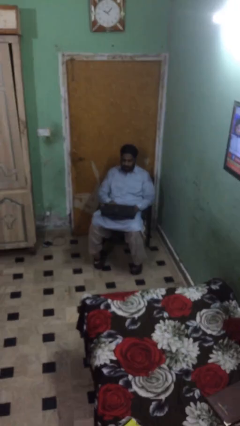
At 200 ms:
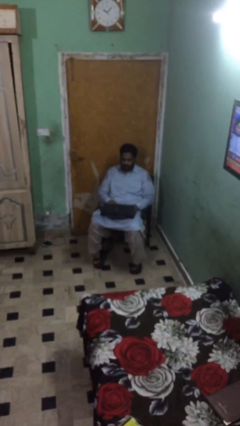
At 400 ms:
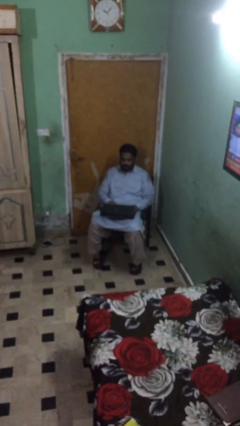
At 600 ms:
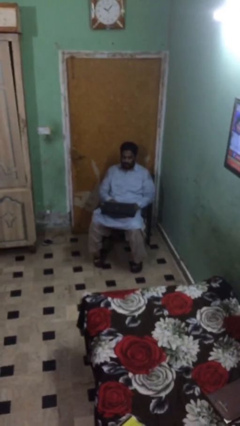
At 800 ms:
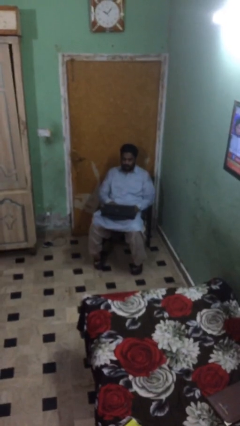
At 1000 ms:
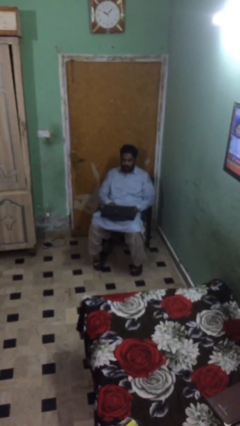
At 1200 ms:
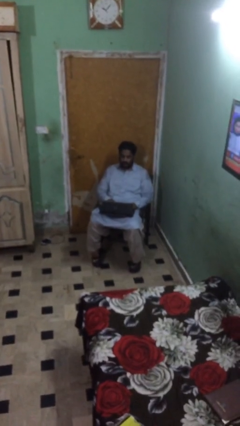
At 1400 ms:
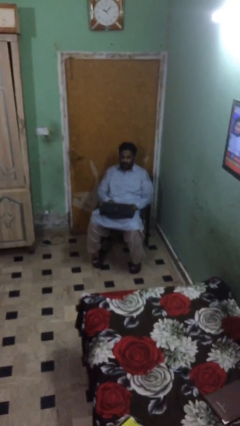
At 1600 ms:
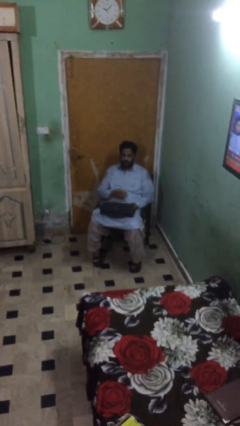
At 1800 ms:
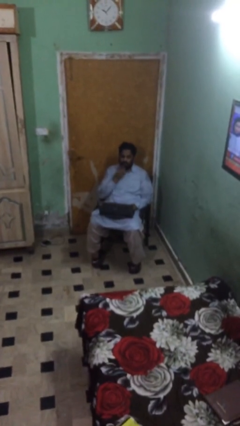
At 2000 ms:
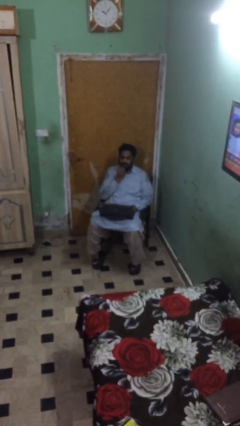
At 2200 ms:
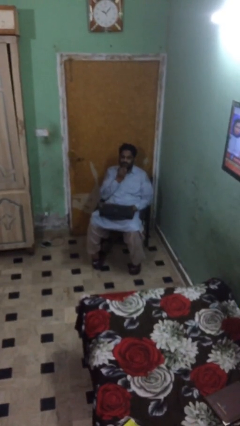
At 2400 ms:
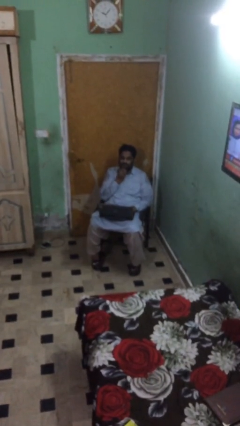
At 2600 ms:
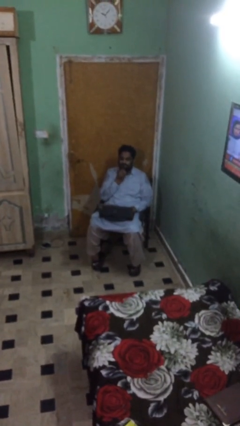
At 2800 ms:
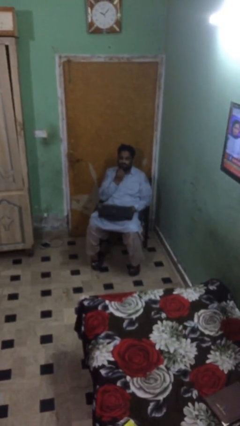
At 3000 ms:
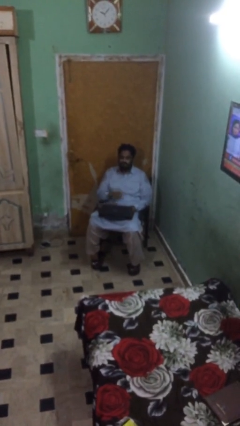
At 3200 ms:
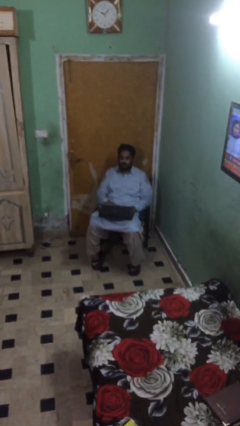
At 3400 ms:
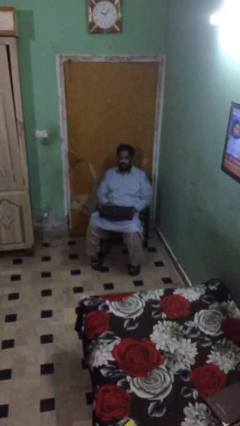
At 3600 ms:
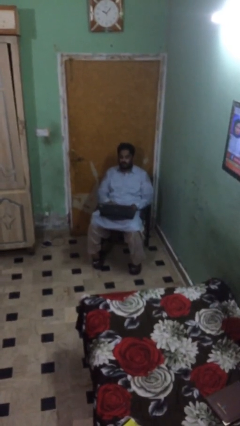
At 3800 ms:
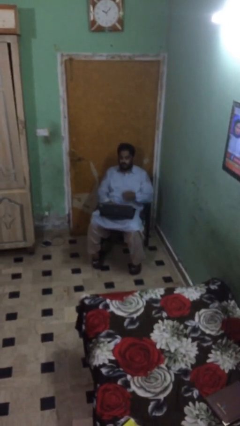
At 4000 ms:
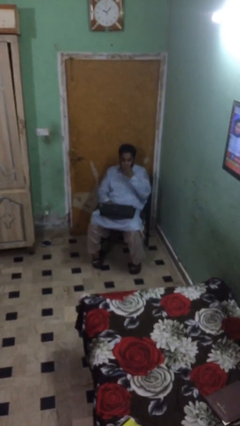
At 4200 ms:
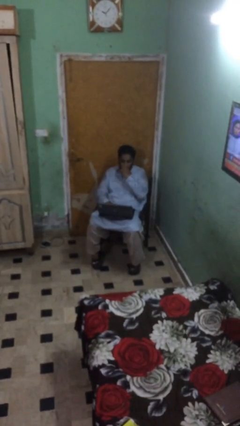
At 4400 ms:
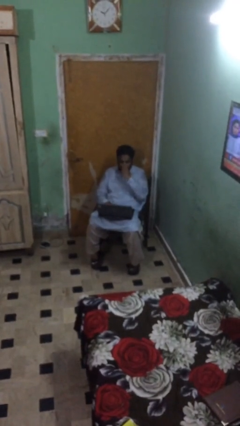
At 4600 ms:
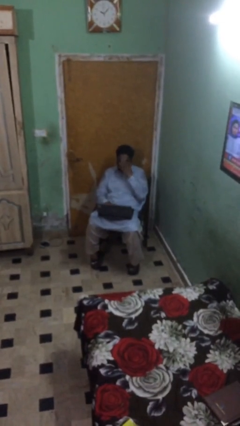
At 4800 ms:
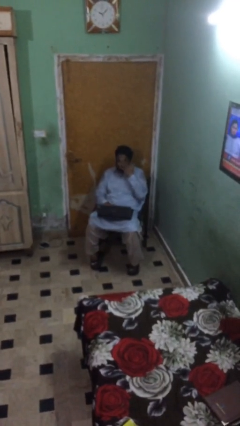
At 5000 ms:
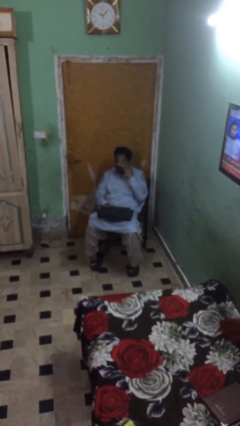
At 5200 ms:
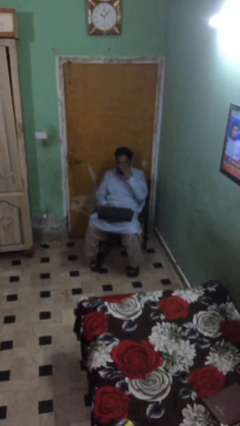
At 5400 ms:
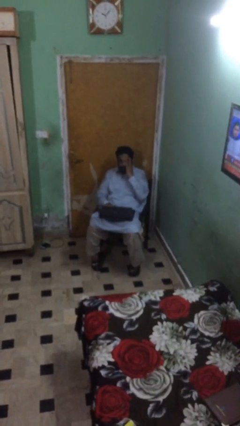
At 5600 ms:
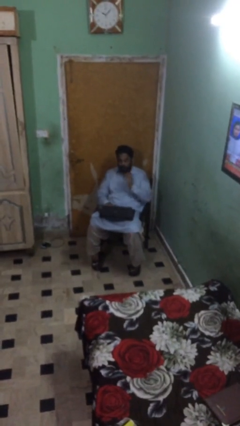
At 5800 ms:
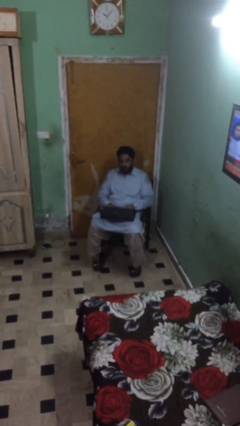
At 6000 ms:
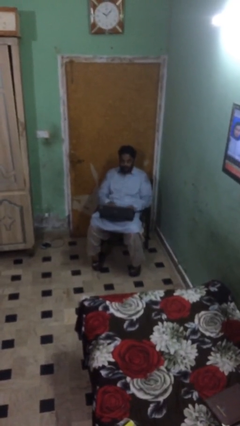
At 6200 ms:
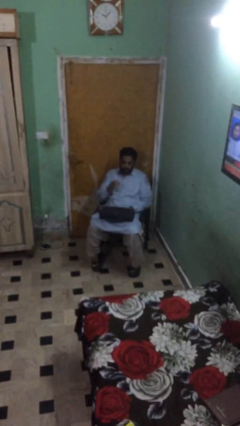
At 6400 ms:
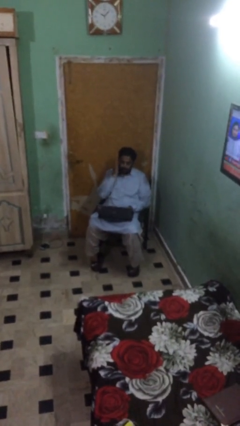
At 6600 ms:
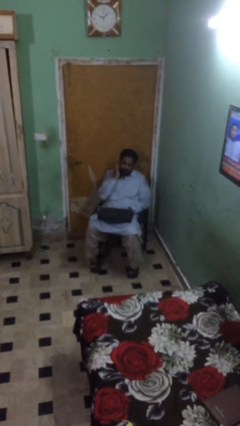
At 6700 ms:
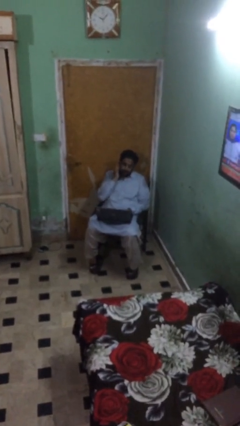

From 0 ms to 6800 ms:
person interacts with laptop

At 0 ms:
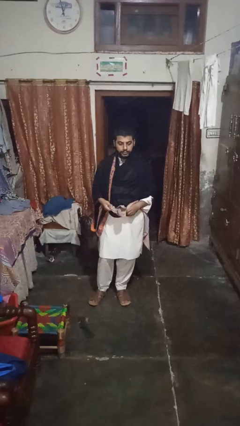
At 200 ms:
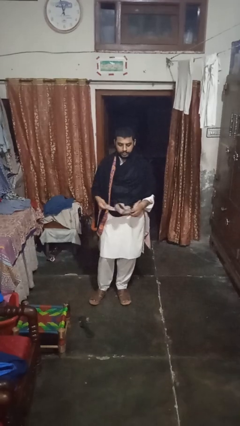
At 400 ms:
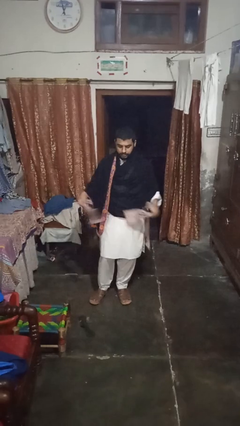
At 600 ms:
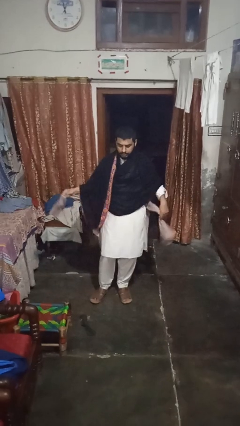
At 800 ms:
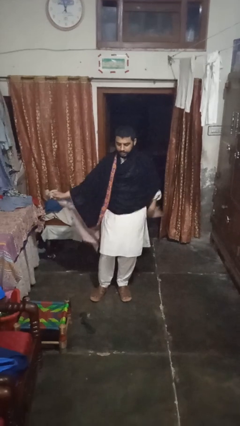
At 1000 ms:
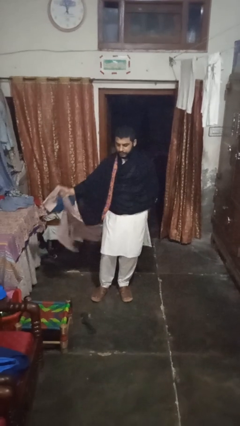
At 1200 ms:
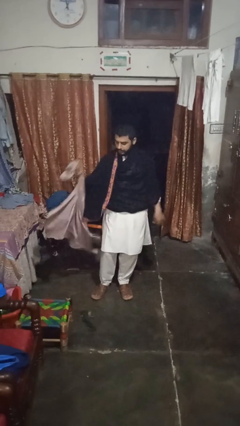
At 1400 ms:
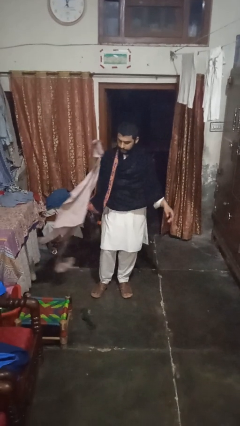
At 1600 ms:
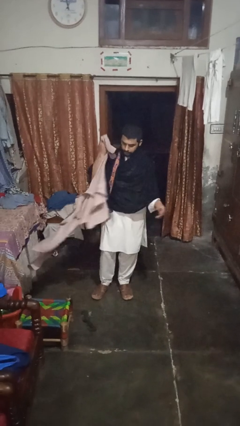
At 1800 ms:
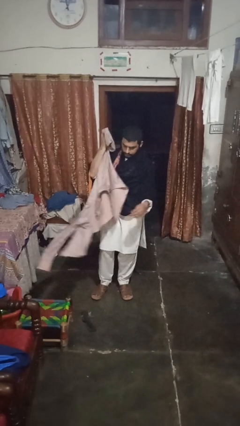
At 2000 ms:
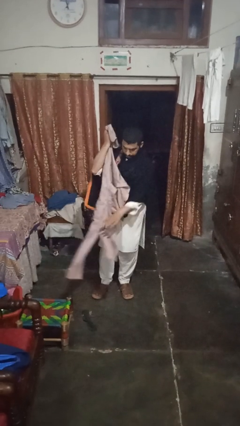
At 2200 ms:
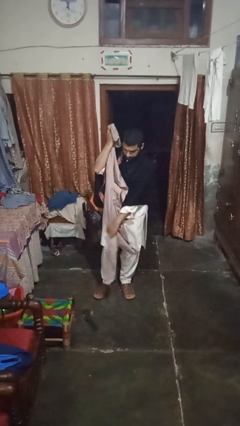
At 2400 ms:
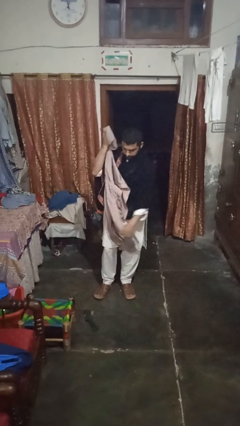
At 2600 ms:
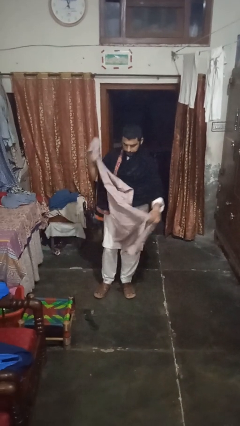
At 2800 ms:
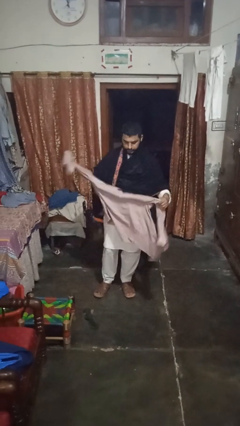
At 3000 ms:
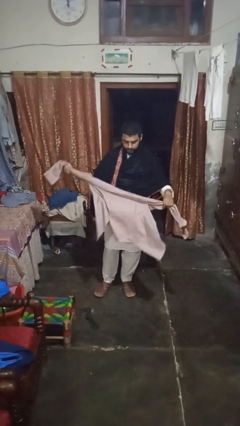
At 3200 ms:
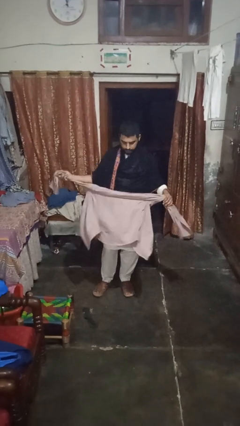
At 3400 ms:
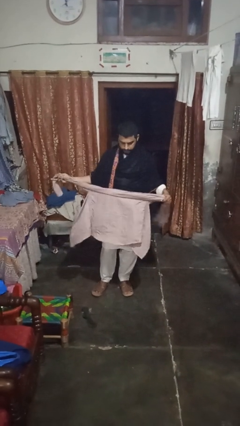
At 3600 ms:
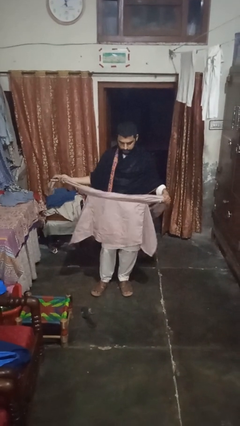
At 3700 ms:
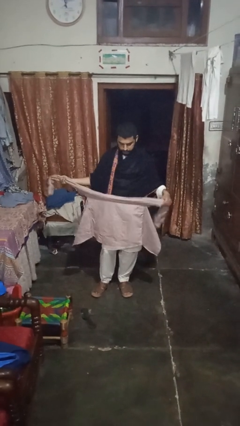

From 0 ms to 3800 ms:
person unties jacket around waist

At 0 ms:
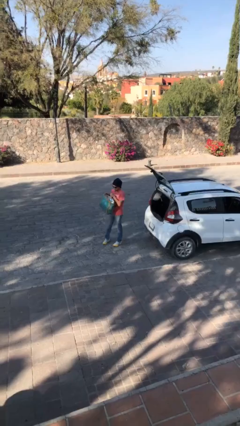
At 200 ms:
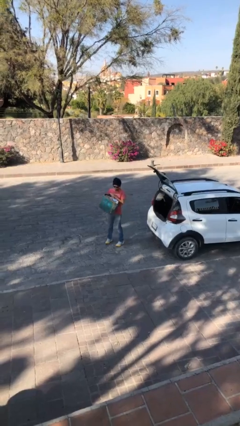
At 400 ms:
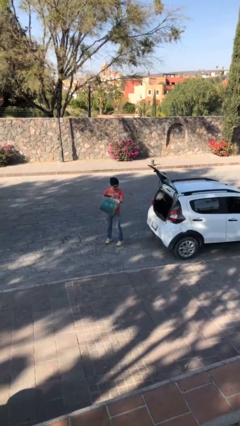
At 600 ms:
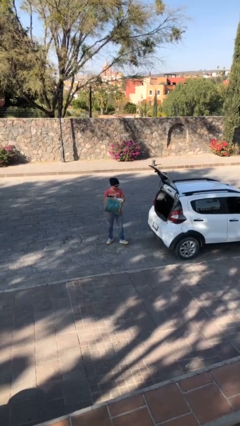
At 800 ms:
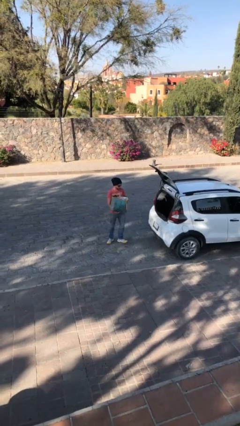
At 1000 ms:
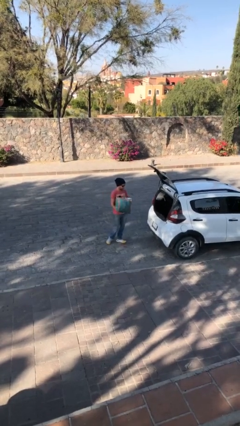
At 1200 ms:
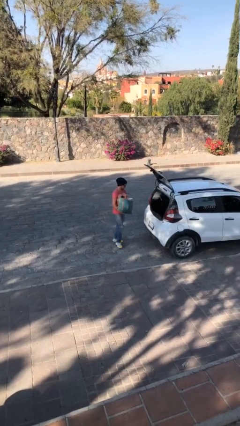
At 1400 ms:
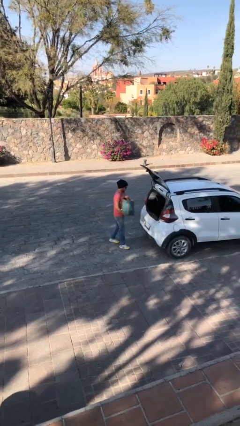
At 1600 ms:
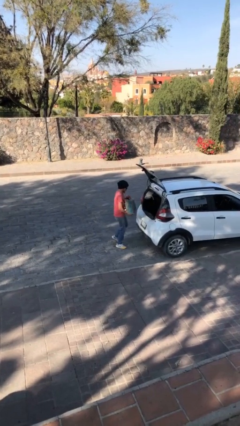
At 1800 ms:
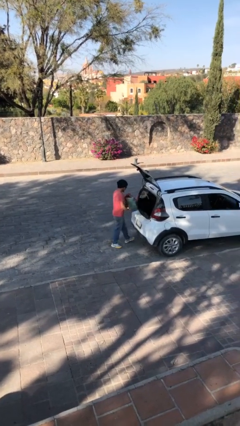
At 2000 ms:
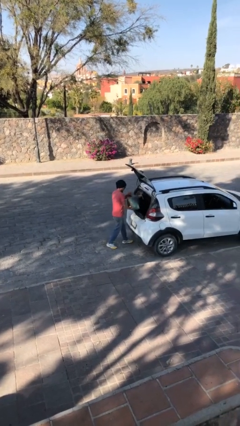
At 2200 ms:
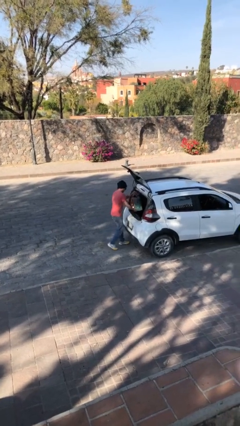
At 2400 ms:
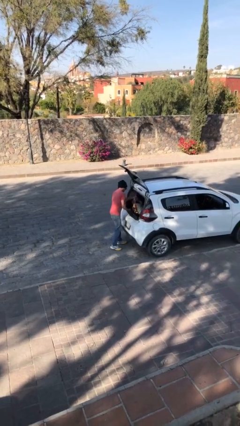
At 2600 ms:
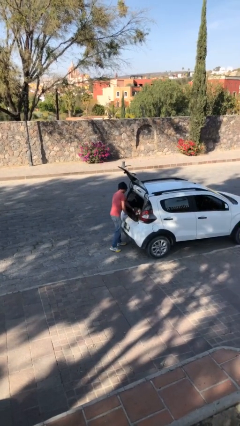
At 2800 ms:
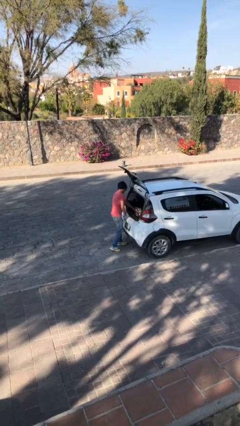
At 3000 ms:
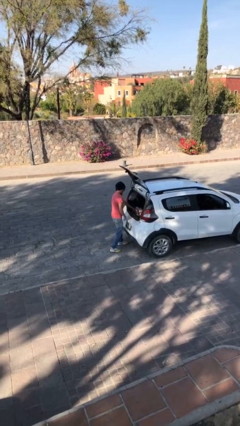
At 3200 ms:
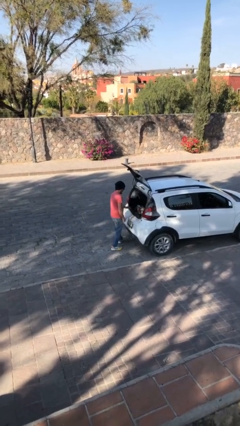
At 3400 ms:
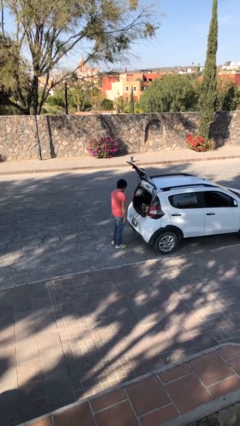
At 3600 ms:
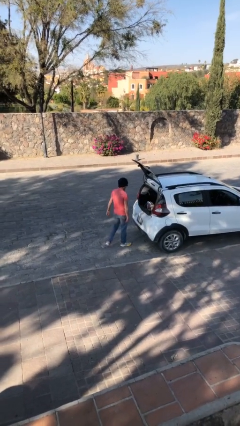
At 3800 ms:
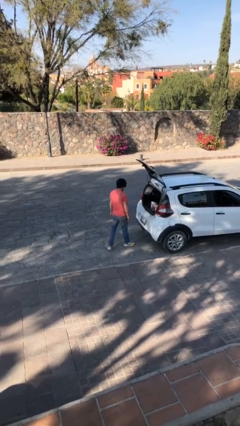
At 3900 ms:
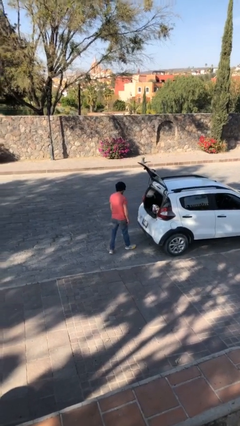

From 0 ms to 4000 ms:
person loads car

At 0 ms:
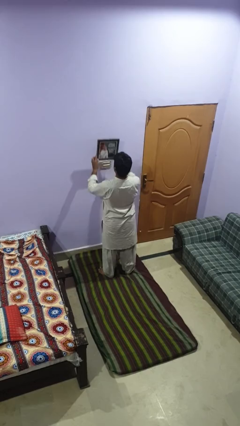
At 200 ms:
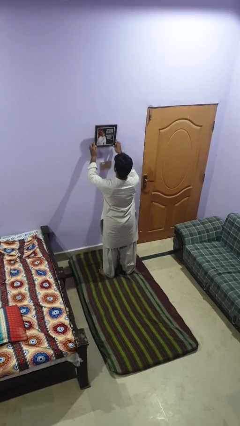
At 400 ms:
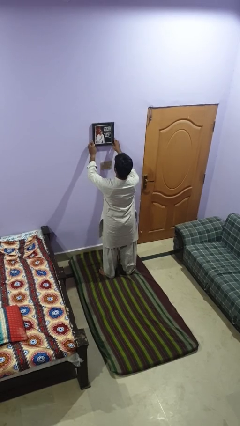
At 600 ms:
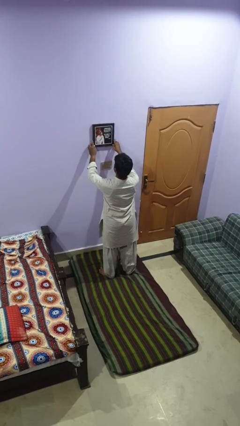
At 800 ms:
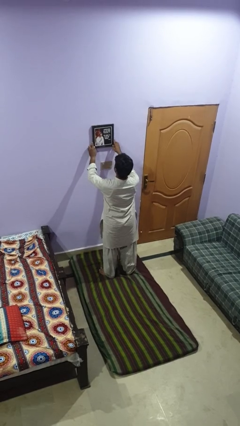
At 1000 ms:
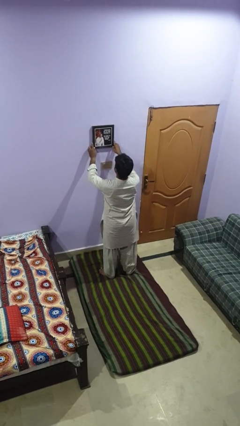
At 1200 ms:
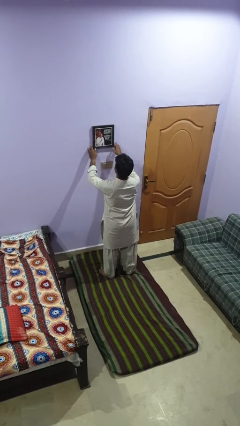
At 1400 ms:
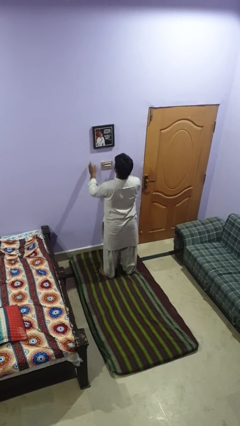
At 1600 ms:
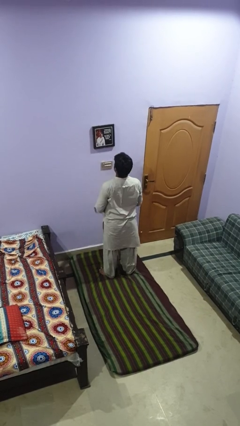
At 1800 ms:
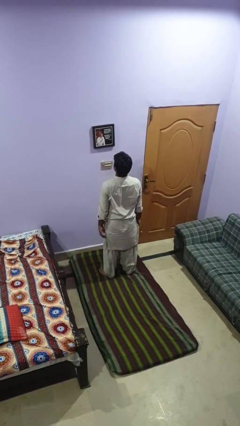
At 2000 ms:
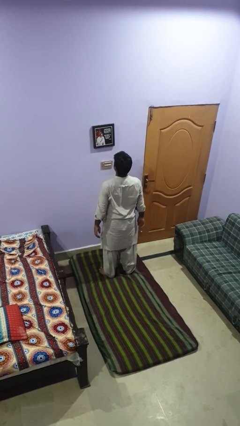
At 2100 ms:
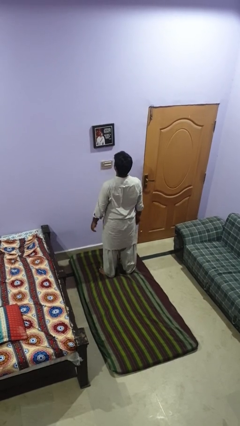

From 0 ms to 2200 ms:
person puts up picture frame

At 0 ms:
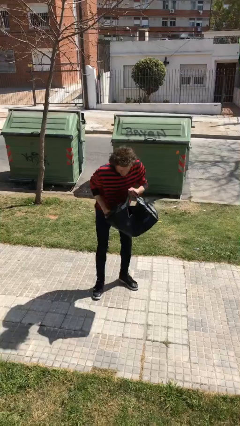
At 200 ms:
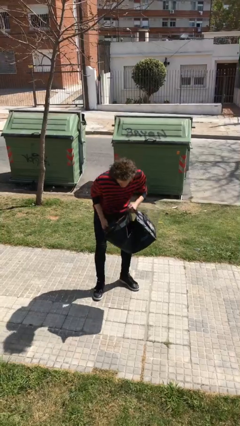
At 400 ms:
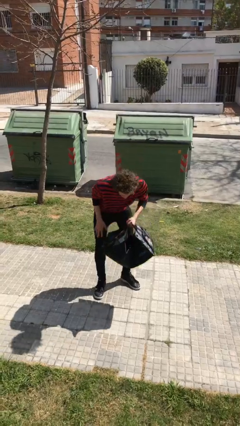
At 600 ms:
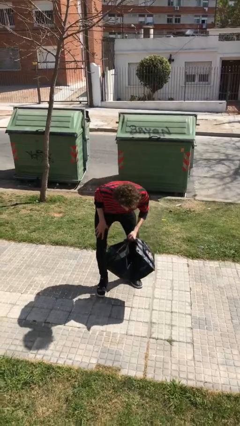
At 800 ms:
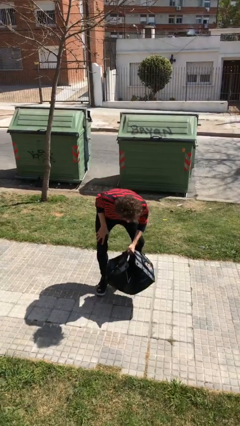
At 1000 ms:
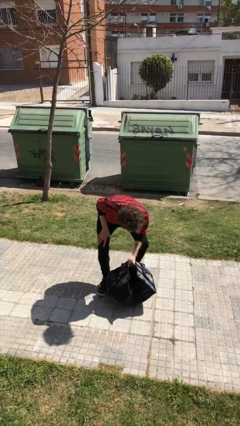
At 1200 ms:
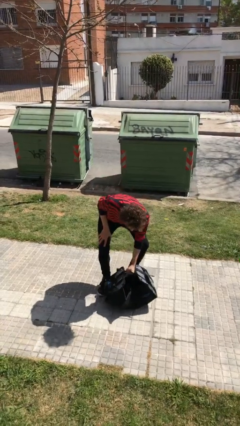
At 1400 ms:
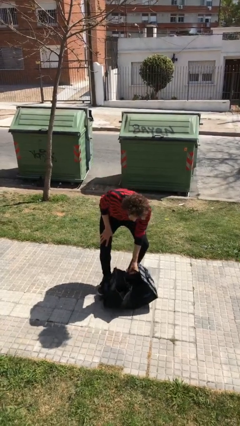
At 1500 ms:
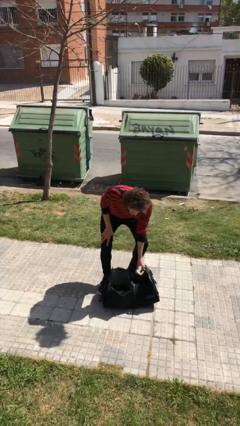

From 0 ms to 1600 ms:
person puts down object on floor
